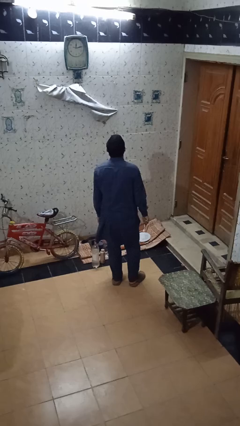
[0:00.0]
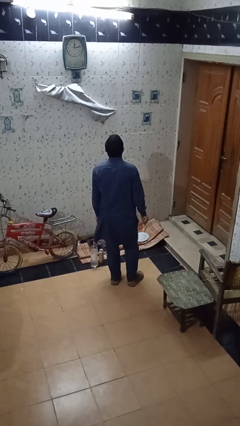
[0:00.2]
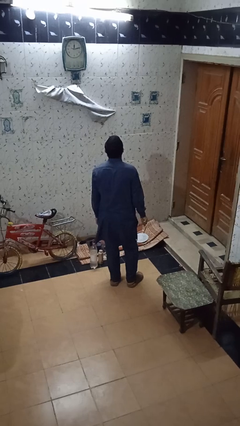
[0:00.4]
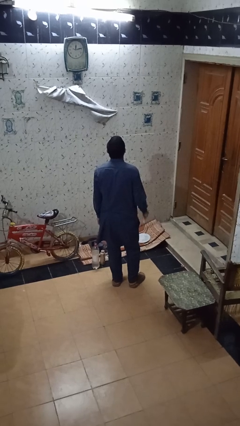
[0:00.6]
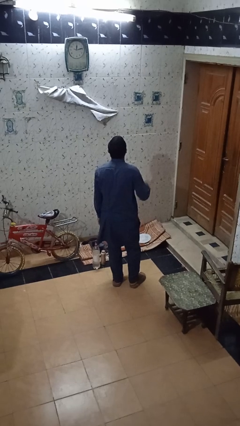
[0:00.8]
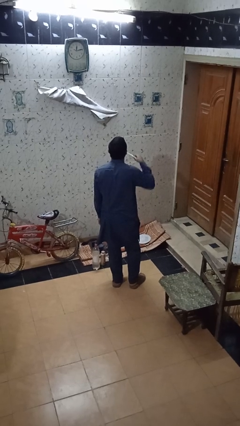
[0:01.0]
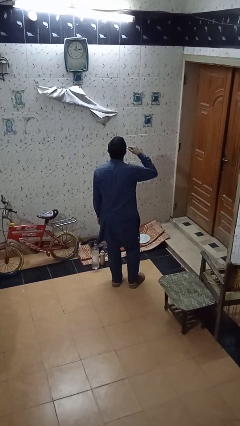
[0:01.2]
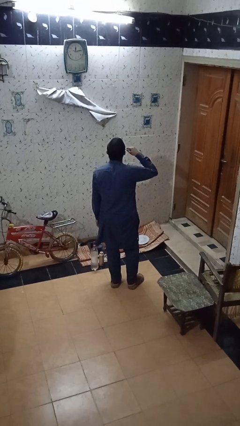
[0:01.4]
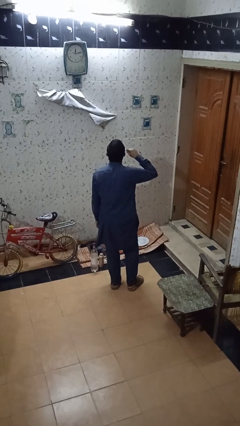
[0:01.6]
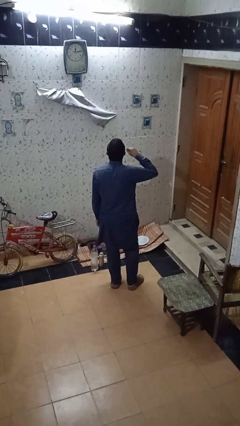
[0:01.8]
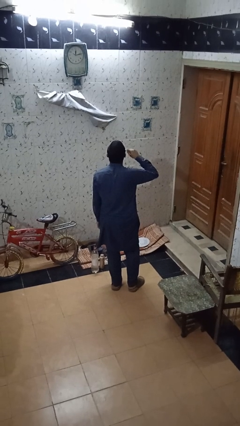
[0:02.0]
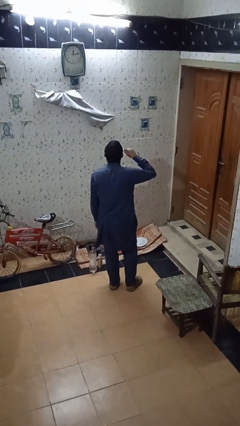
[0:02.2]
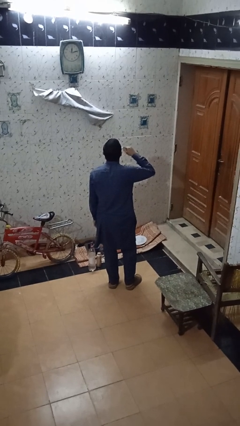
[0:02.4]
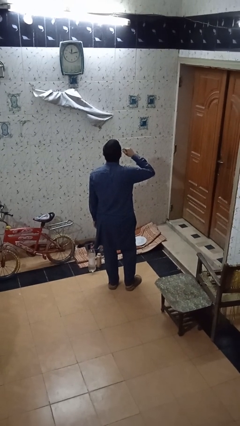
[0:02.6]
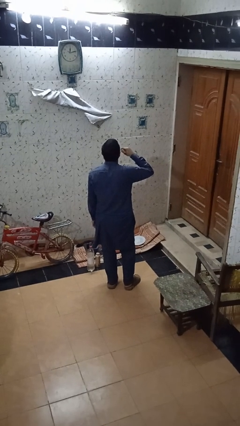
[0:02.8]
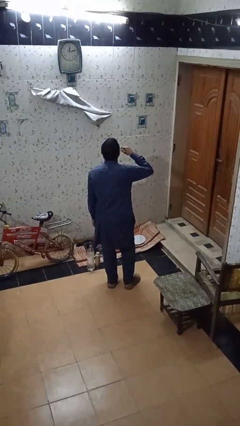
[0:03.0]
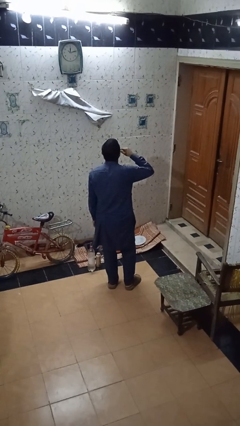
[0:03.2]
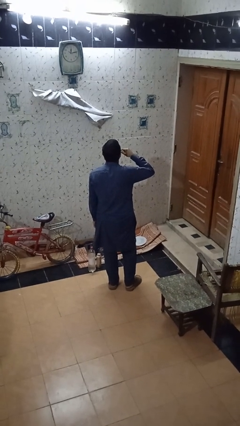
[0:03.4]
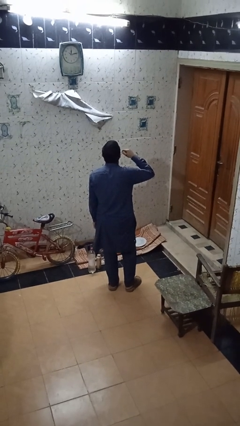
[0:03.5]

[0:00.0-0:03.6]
person brushes teeth

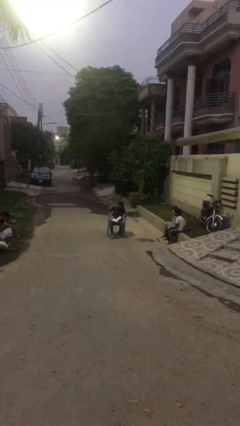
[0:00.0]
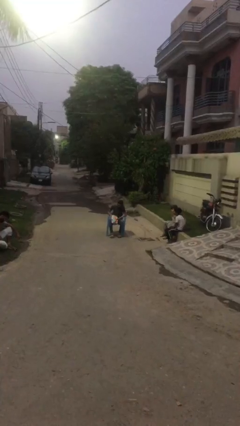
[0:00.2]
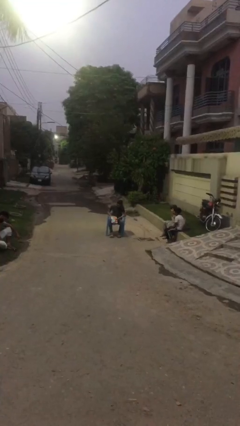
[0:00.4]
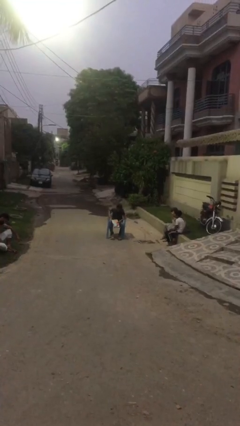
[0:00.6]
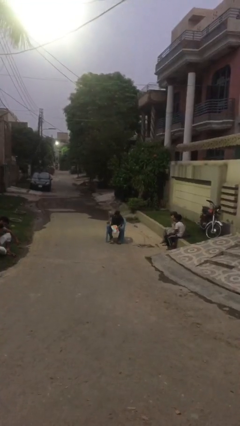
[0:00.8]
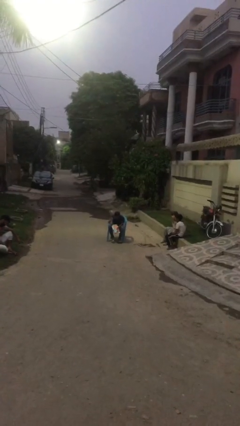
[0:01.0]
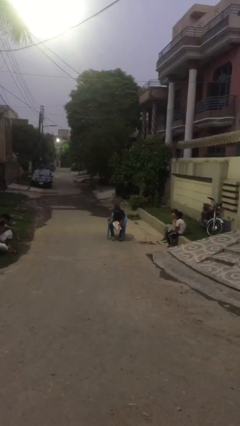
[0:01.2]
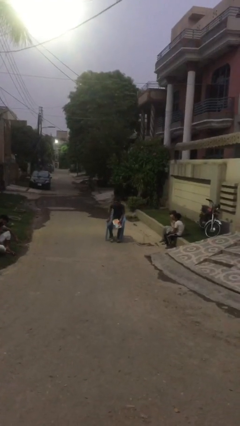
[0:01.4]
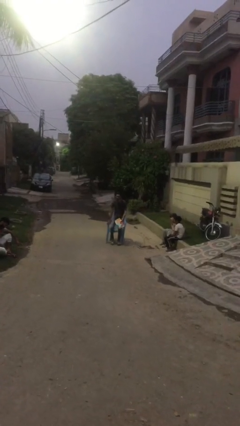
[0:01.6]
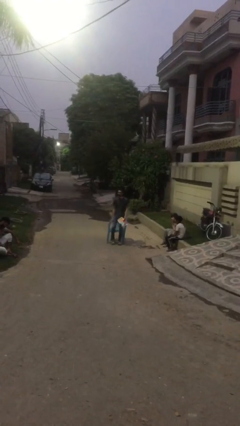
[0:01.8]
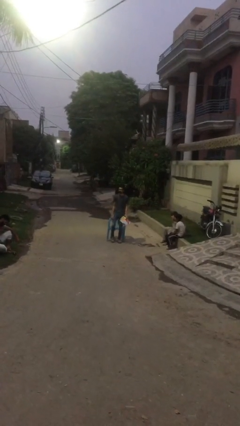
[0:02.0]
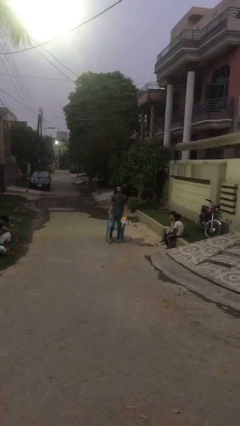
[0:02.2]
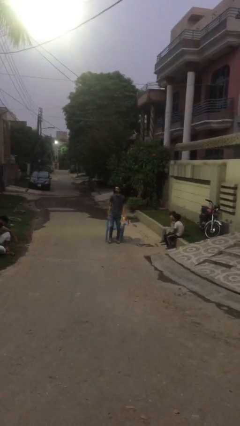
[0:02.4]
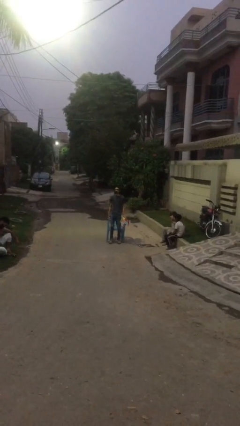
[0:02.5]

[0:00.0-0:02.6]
person stands up

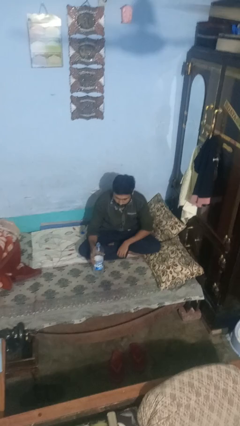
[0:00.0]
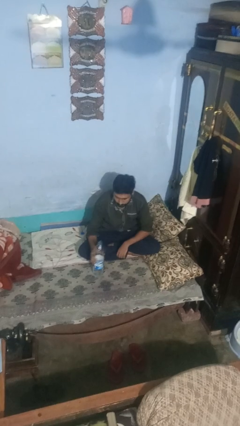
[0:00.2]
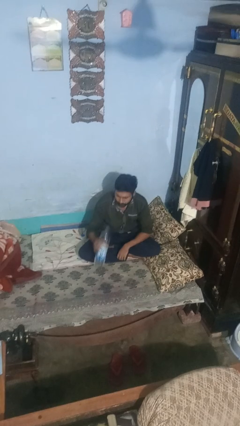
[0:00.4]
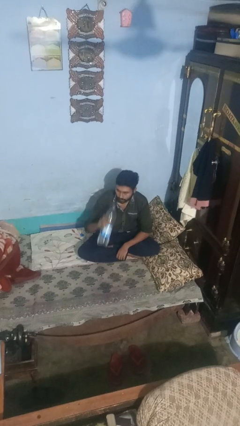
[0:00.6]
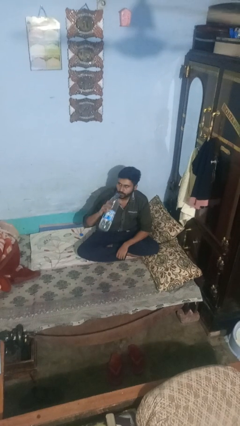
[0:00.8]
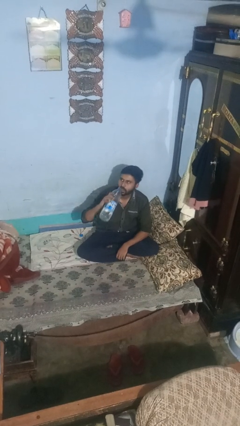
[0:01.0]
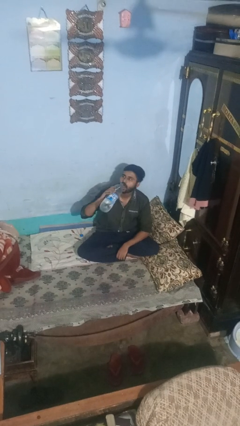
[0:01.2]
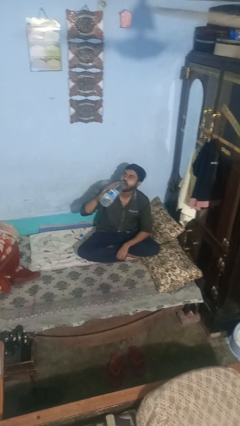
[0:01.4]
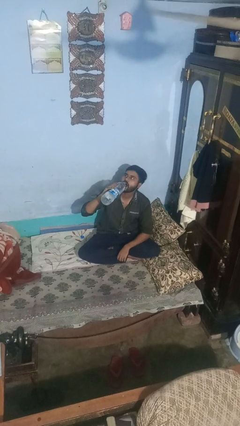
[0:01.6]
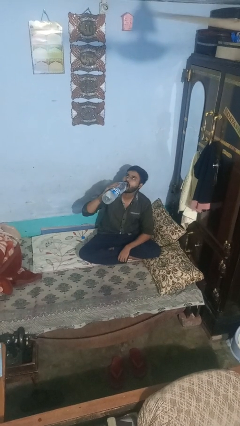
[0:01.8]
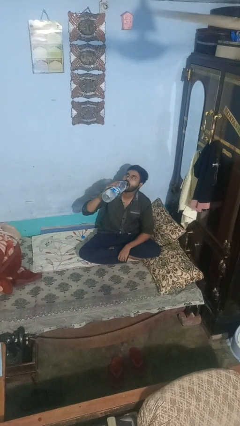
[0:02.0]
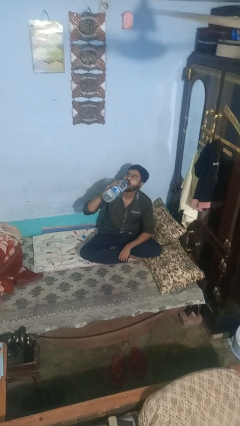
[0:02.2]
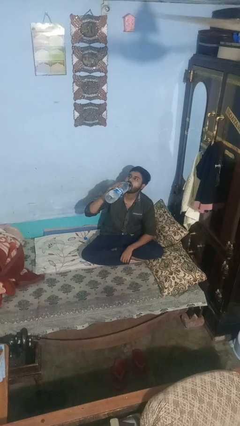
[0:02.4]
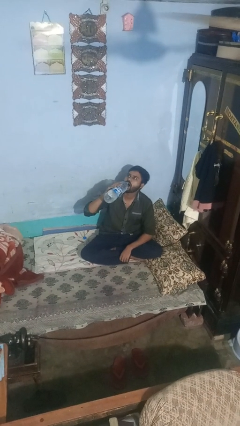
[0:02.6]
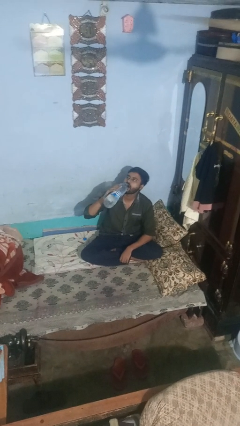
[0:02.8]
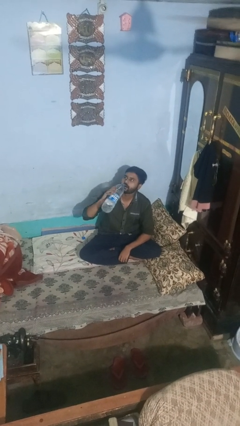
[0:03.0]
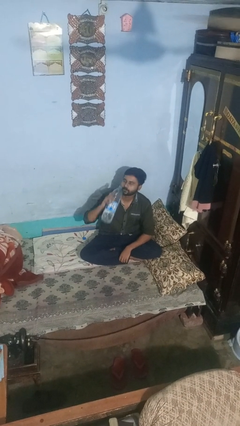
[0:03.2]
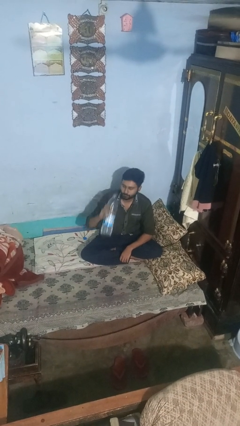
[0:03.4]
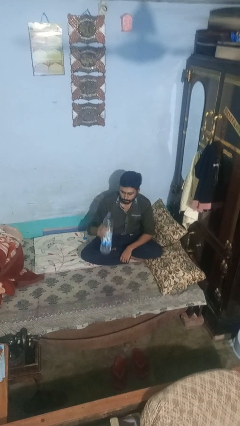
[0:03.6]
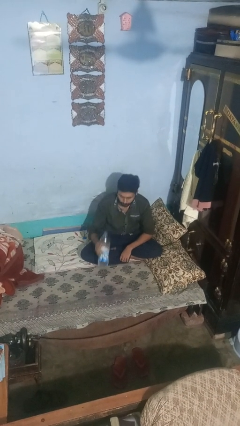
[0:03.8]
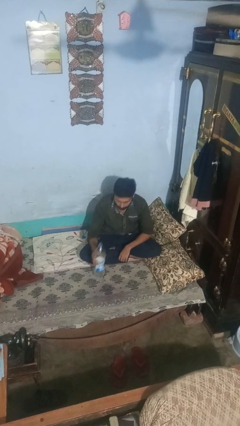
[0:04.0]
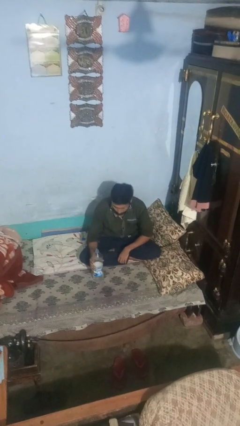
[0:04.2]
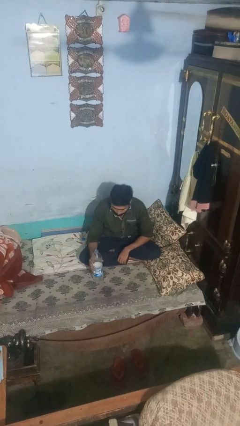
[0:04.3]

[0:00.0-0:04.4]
person drinks from bottle

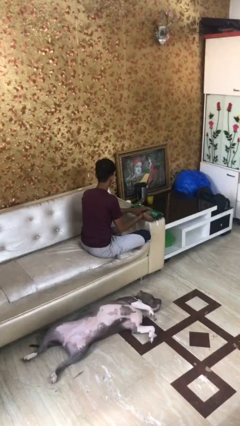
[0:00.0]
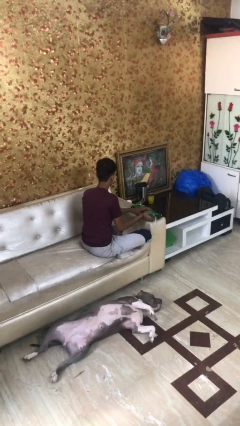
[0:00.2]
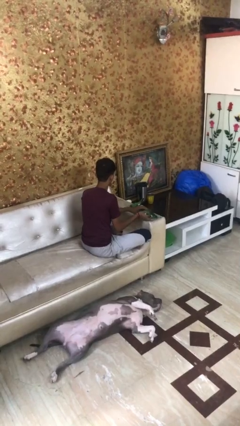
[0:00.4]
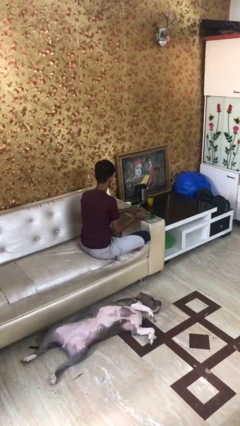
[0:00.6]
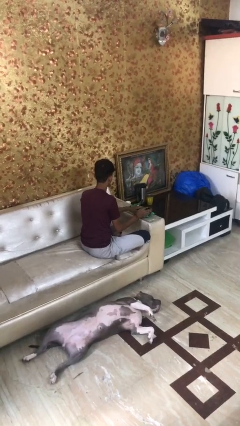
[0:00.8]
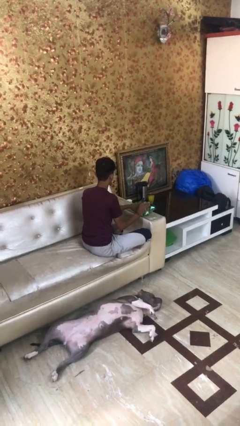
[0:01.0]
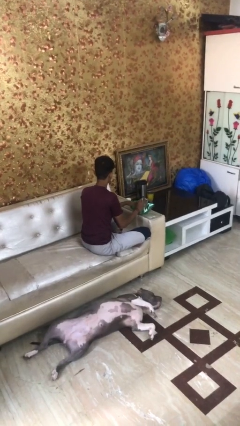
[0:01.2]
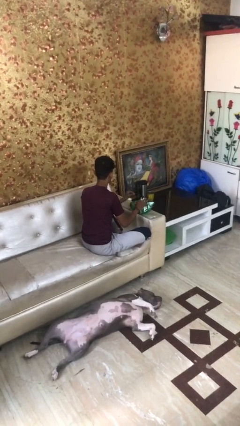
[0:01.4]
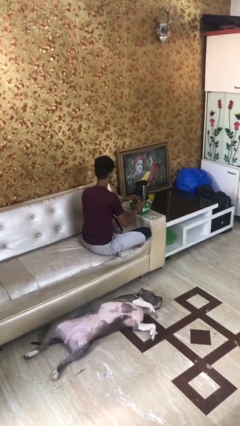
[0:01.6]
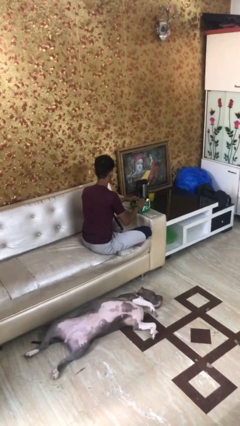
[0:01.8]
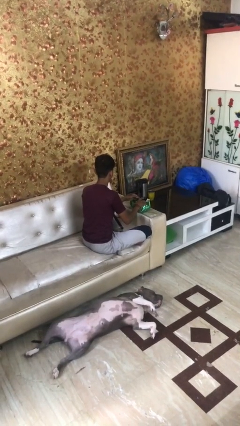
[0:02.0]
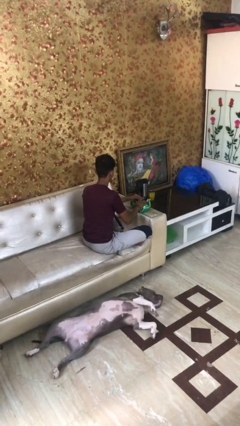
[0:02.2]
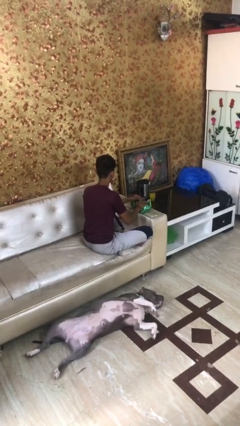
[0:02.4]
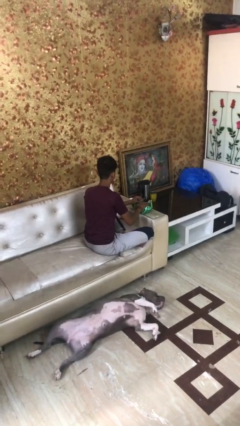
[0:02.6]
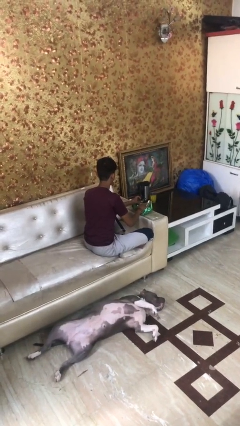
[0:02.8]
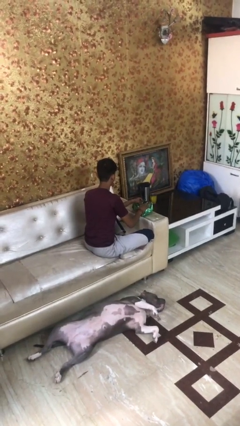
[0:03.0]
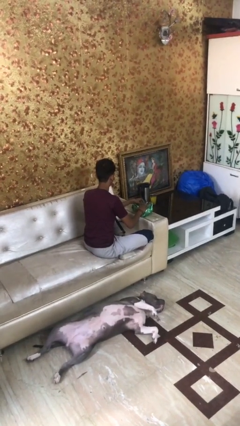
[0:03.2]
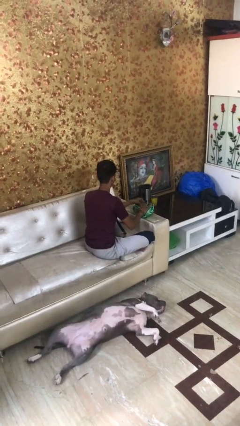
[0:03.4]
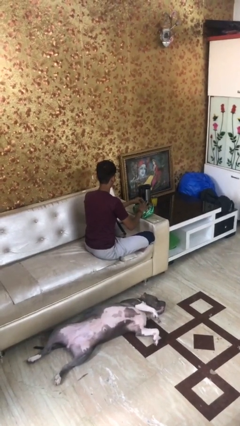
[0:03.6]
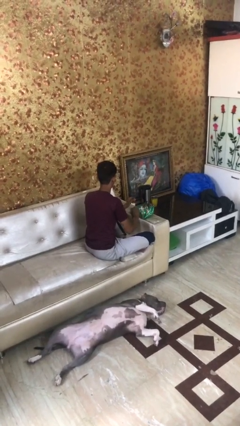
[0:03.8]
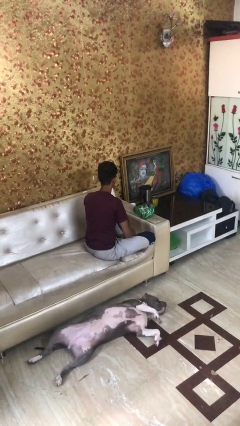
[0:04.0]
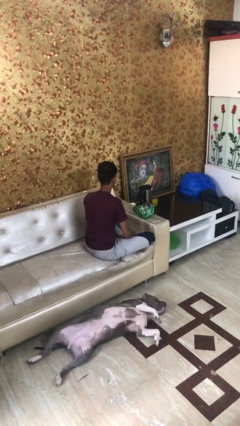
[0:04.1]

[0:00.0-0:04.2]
person wraps box

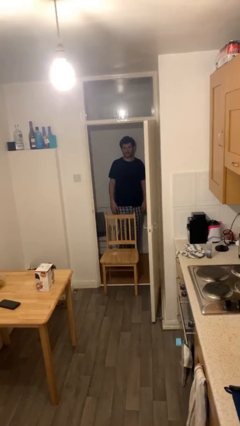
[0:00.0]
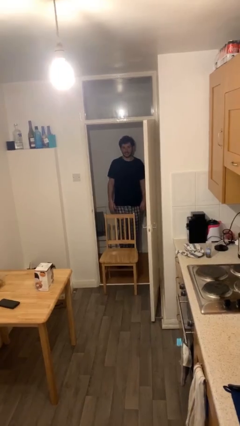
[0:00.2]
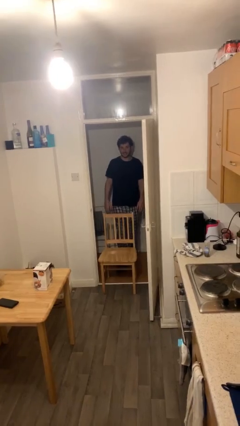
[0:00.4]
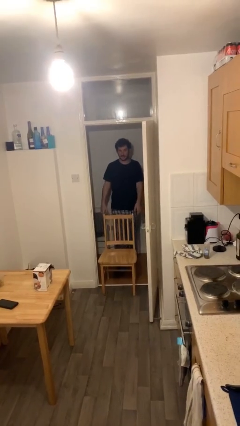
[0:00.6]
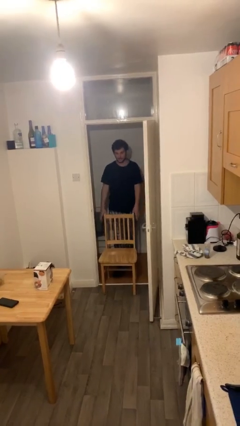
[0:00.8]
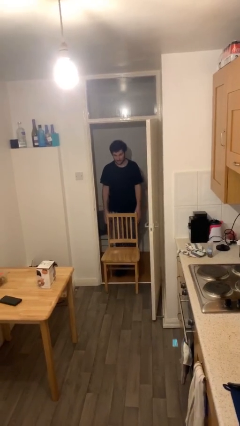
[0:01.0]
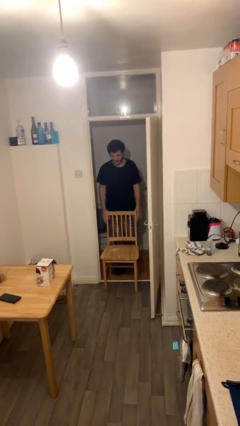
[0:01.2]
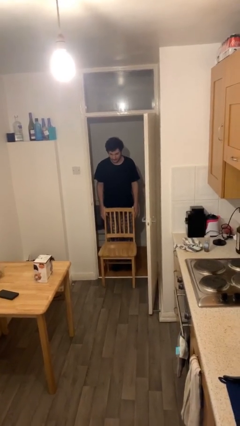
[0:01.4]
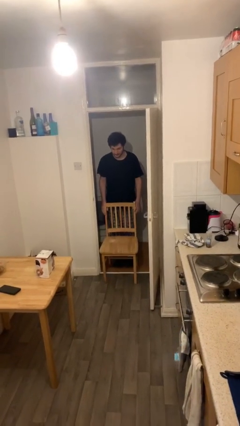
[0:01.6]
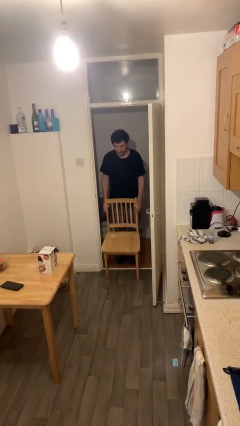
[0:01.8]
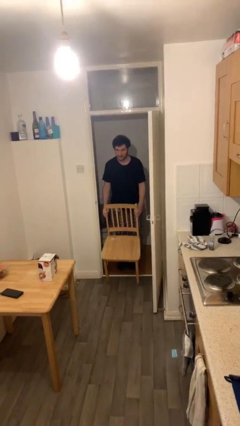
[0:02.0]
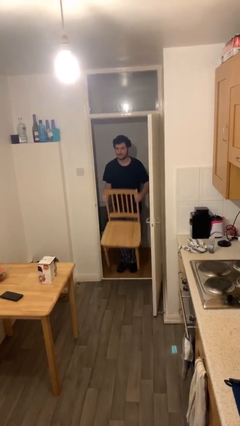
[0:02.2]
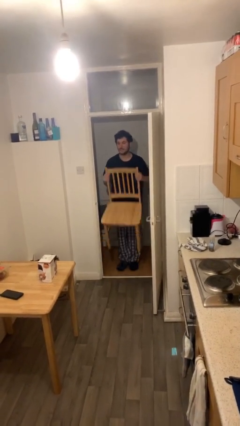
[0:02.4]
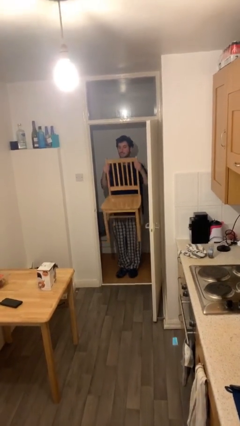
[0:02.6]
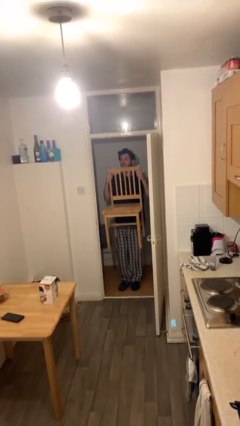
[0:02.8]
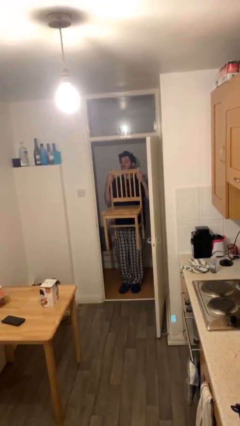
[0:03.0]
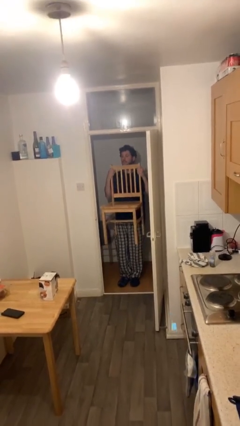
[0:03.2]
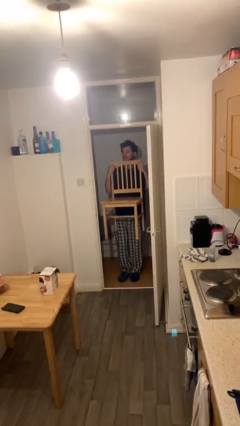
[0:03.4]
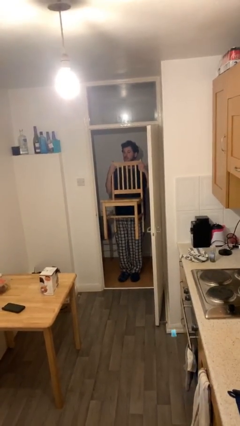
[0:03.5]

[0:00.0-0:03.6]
person picks up object from floor
